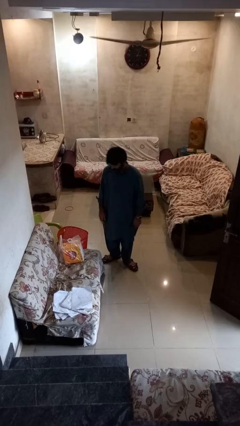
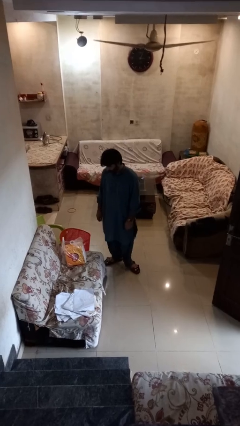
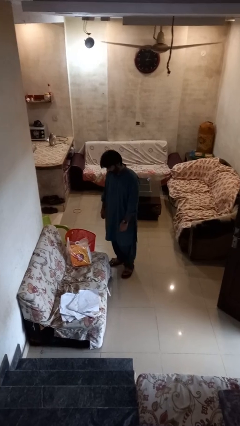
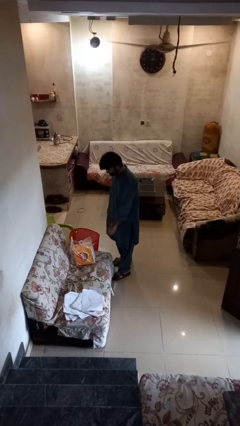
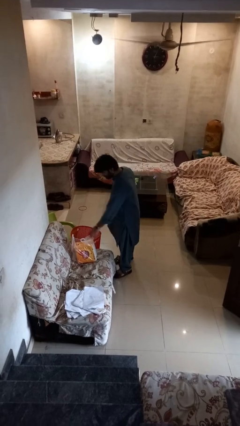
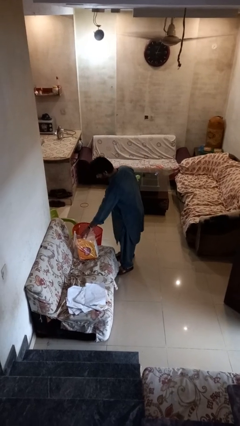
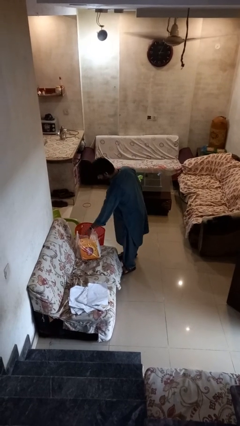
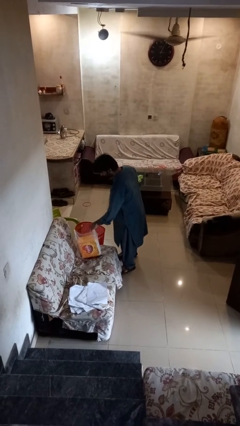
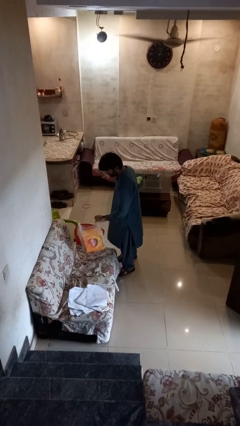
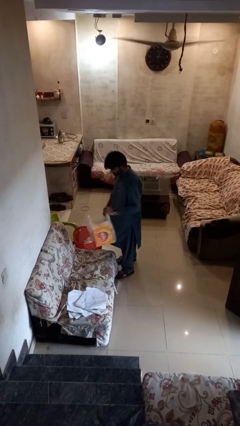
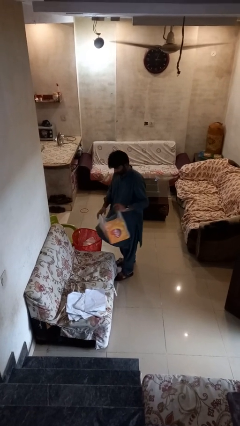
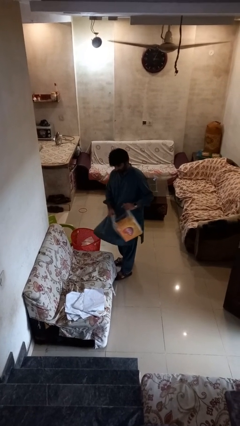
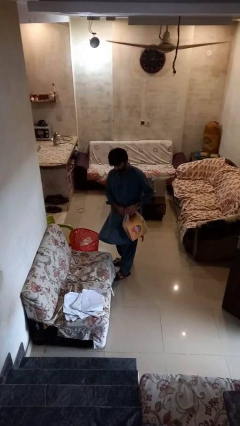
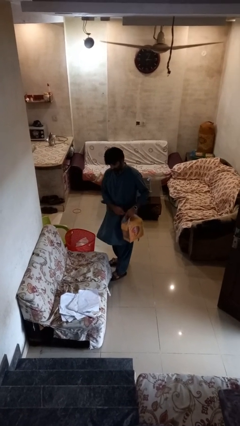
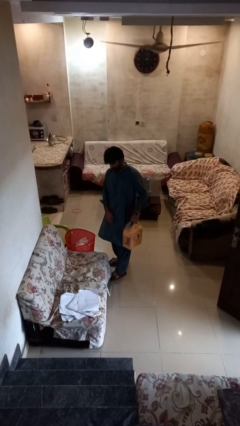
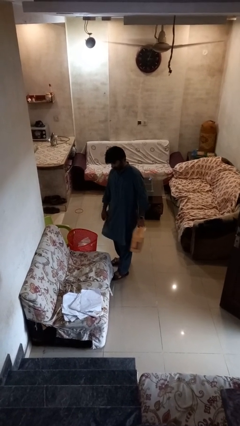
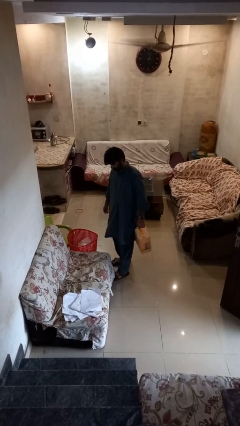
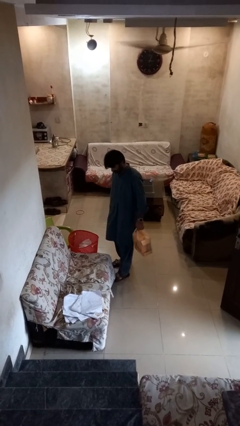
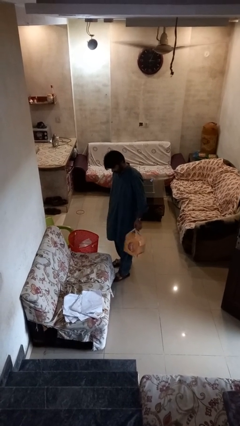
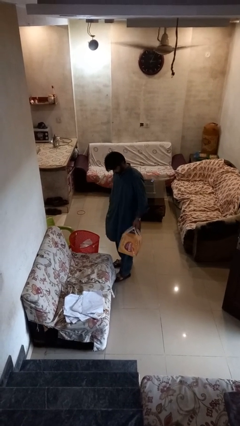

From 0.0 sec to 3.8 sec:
person picks up object from couch

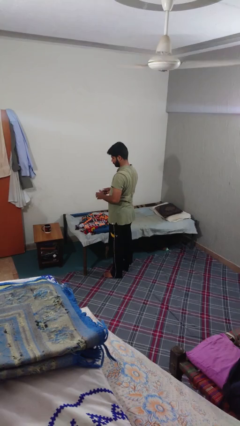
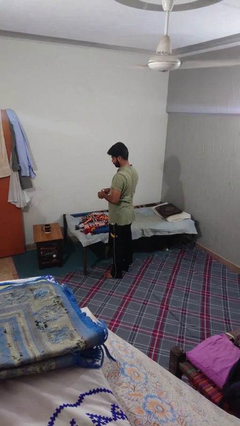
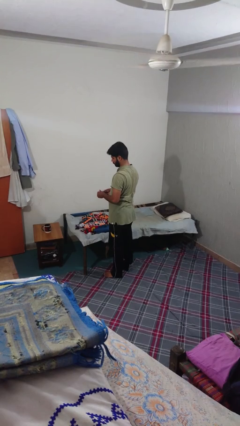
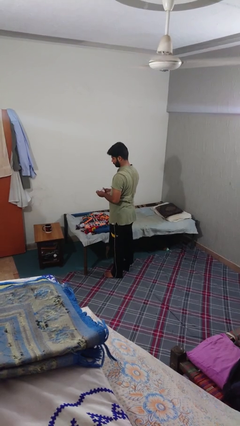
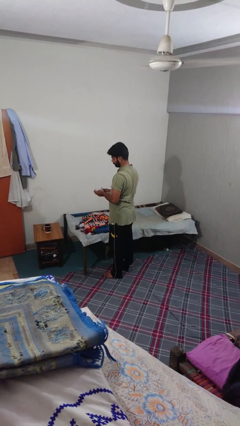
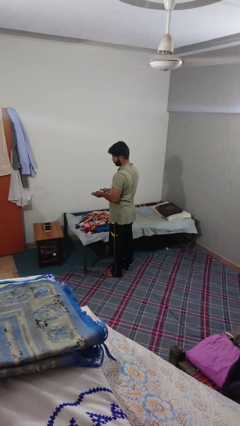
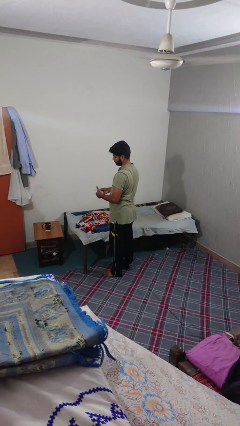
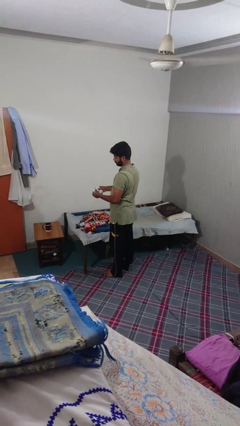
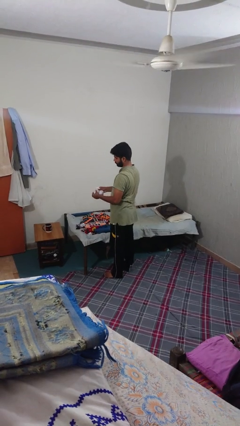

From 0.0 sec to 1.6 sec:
person crumples paper

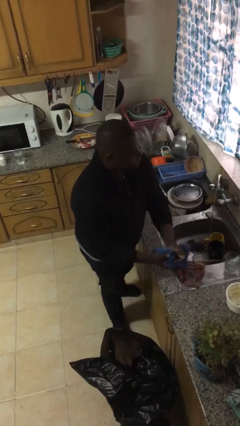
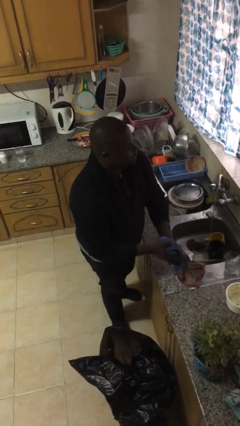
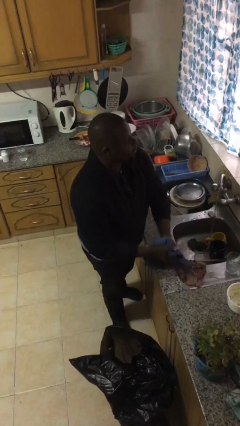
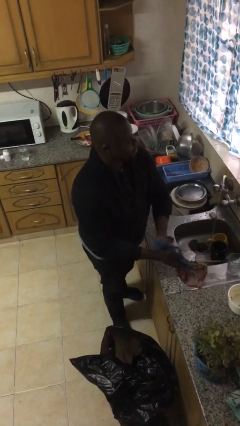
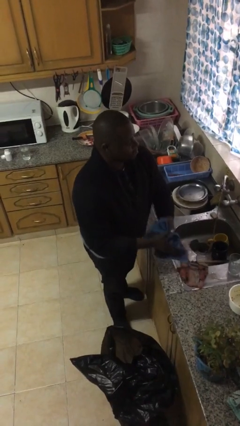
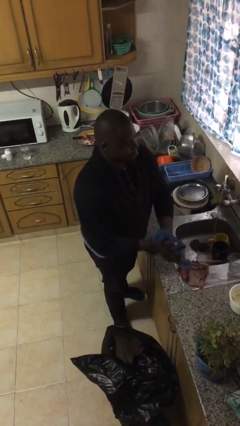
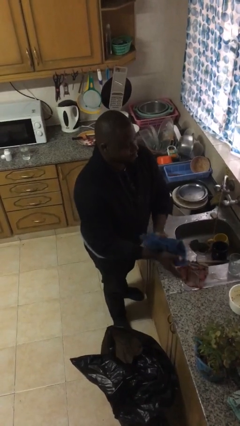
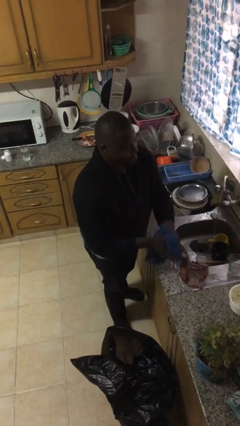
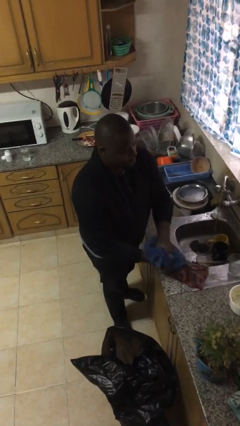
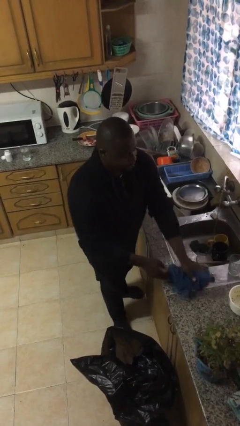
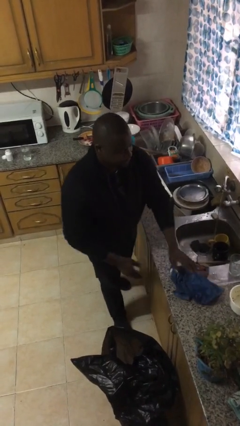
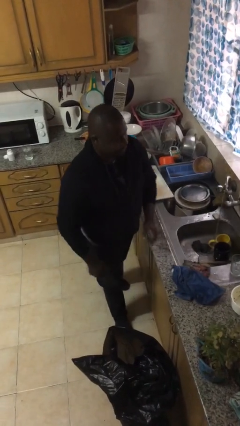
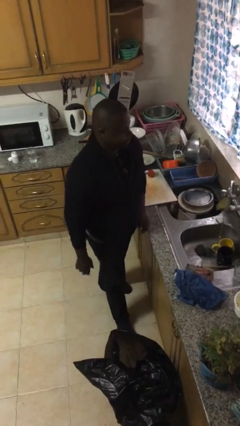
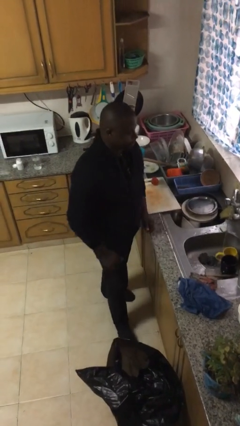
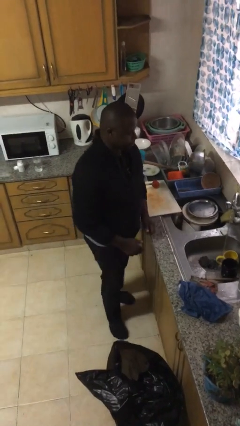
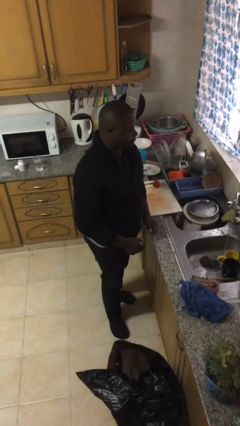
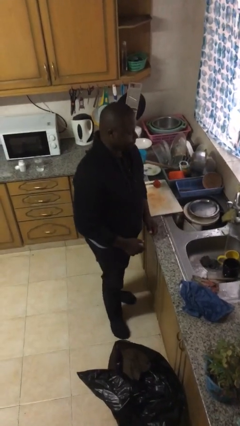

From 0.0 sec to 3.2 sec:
person dries hands with towel

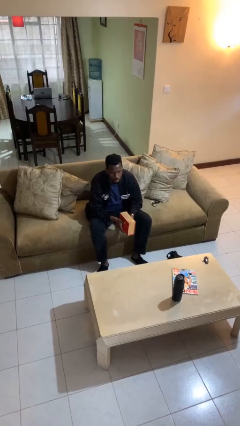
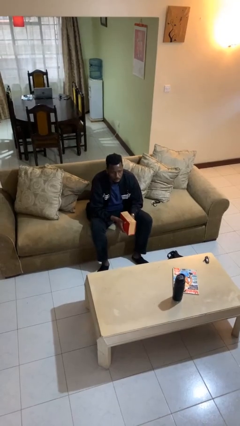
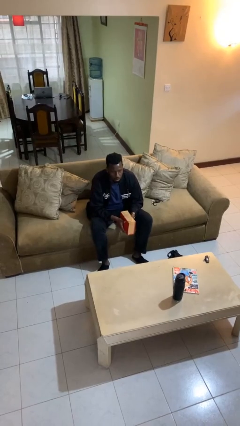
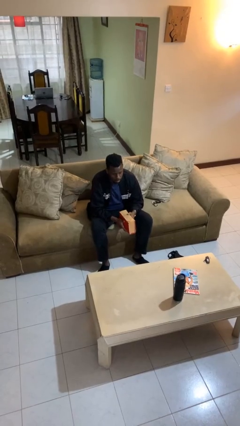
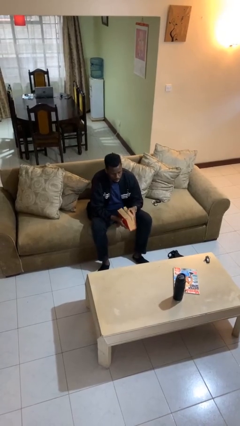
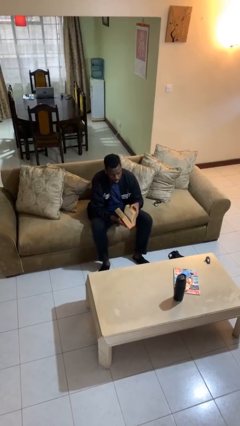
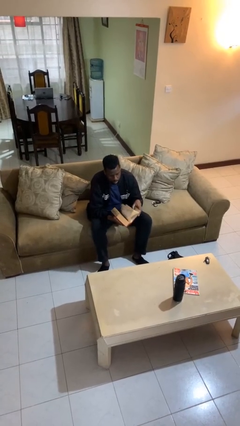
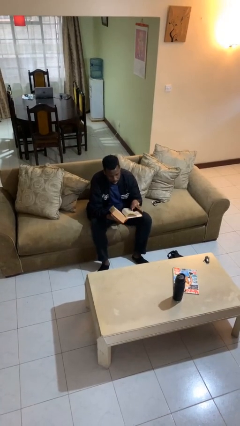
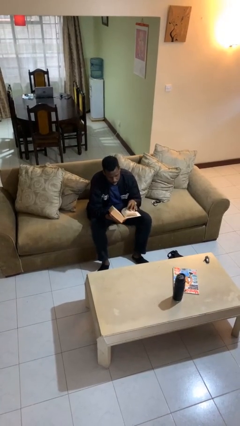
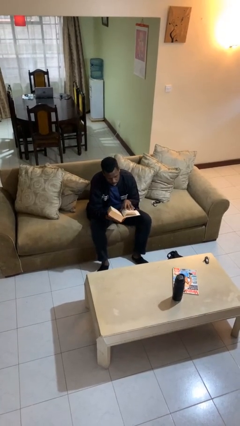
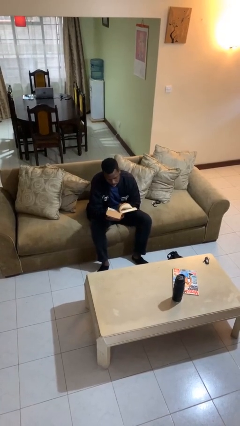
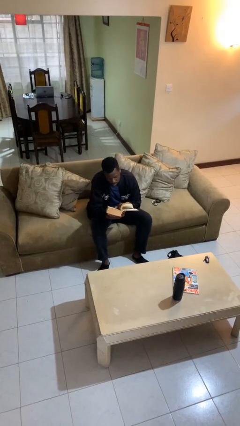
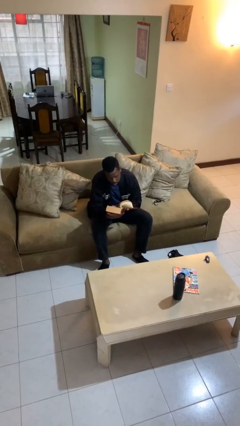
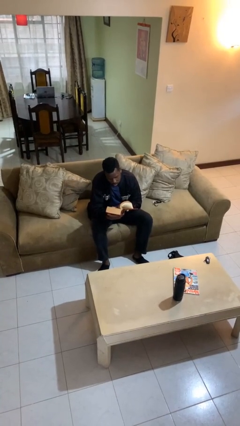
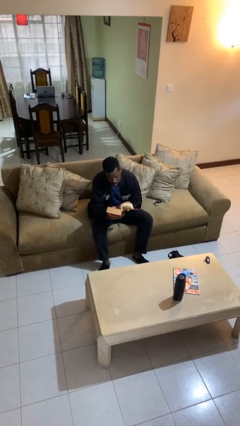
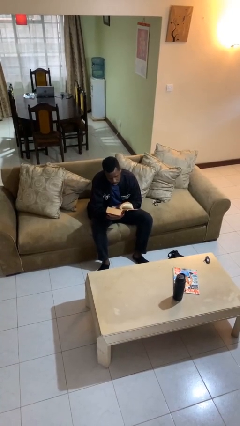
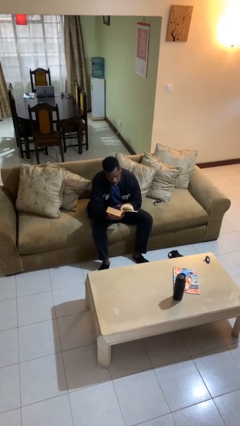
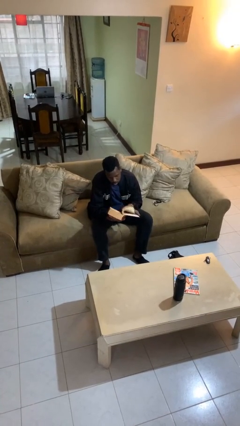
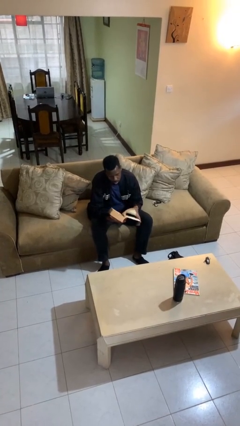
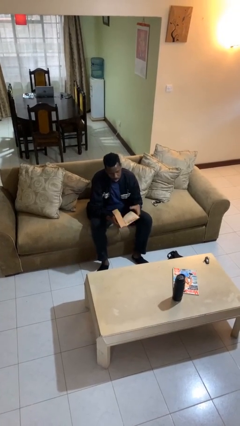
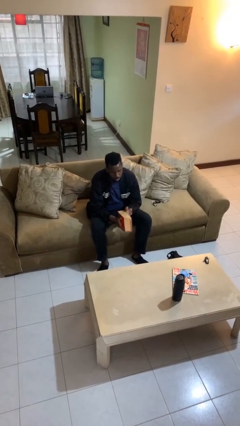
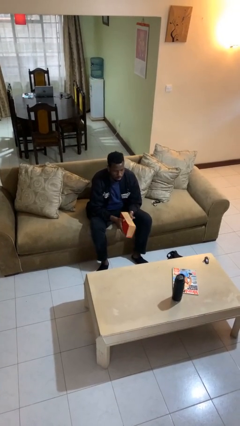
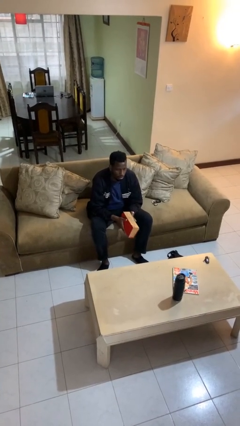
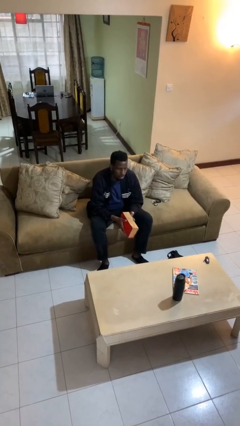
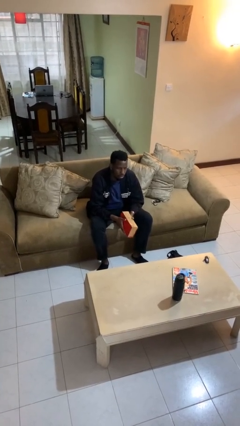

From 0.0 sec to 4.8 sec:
person reads book

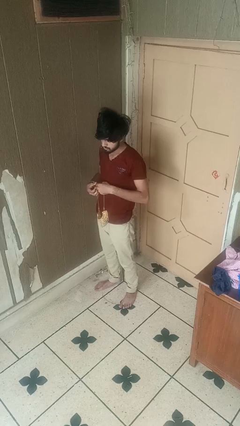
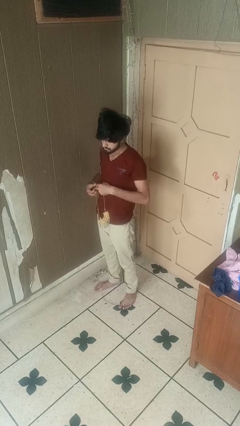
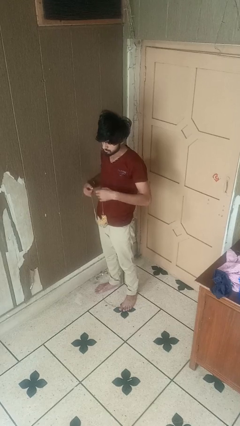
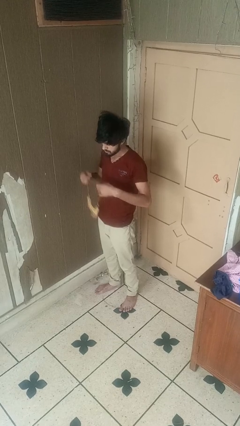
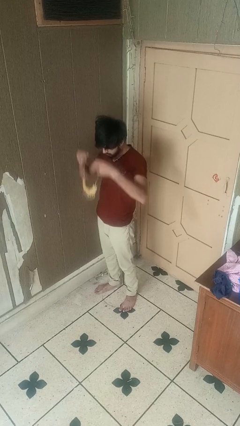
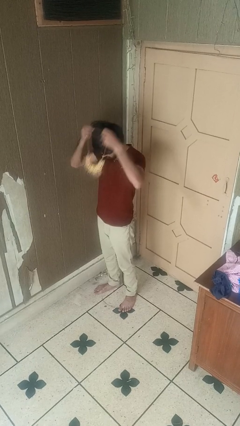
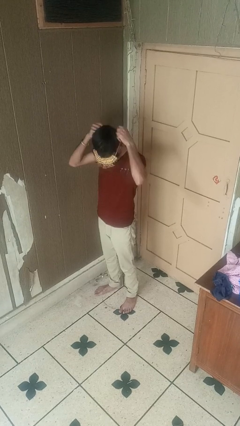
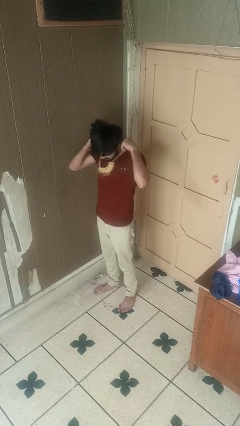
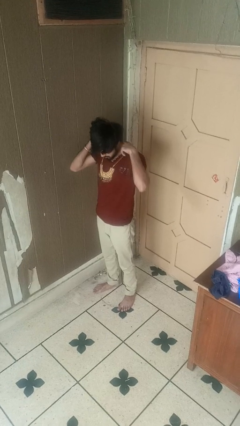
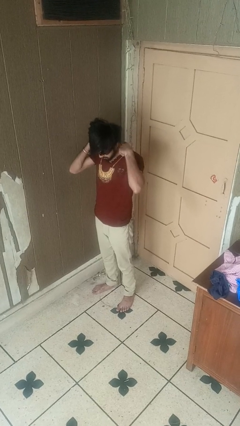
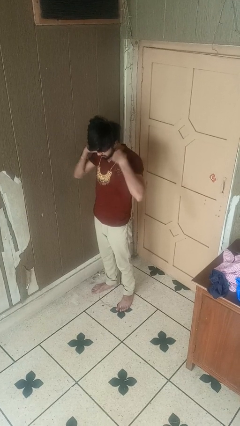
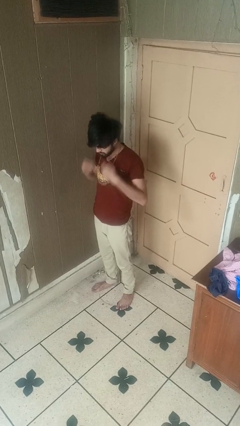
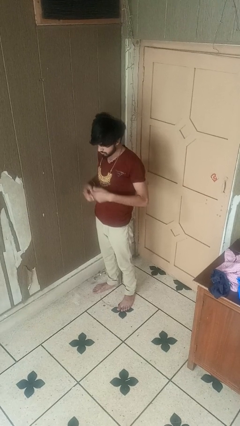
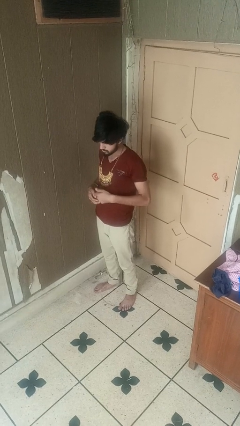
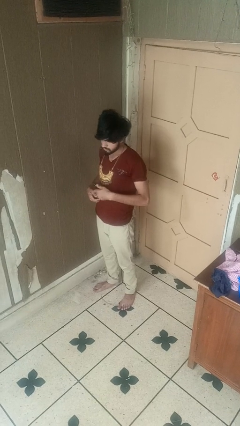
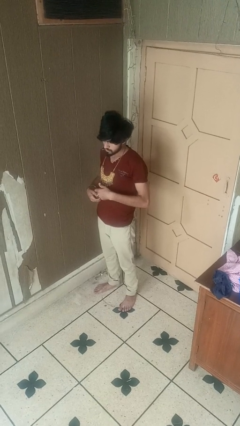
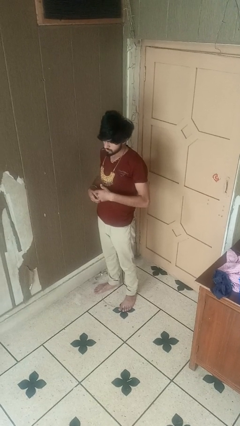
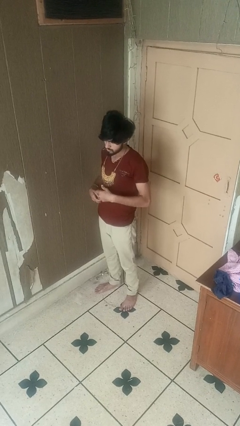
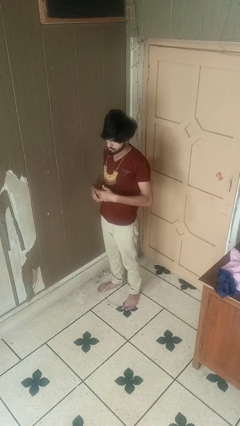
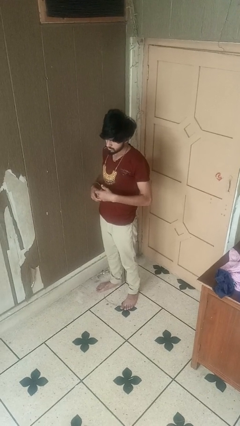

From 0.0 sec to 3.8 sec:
person puts on necklace

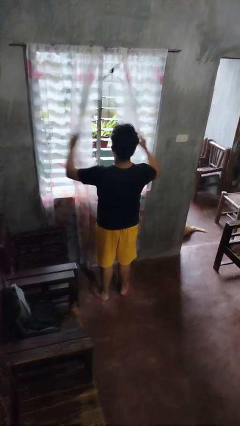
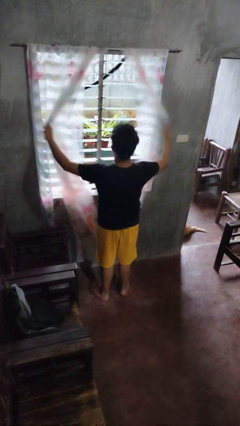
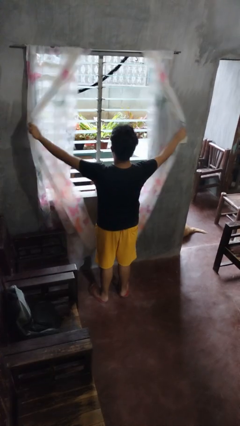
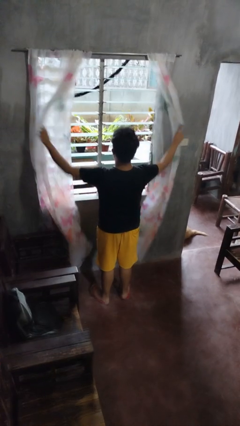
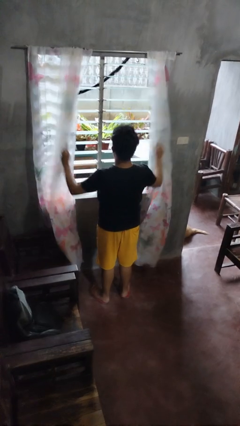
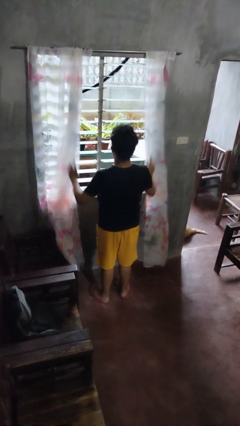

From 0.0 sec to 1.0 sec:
person opens curtains
